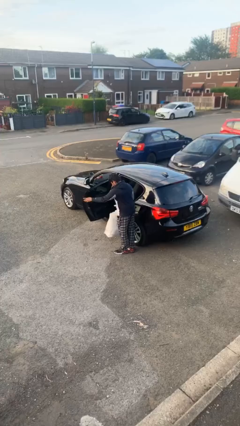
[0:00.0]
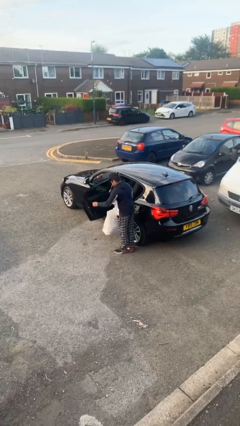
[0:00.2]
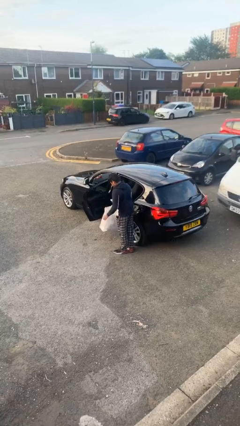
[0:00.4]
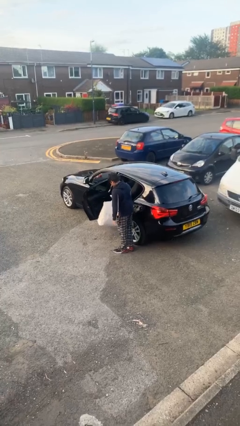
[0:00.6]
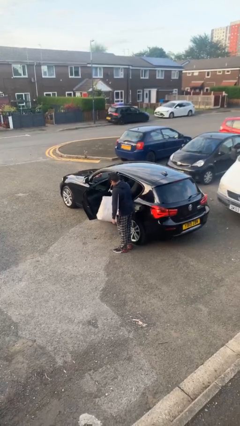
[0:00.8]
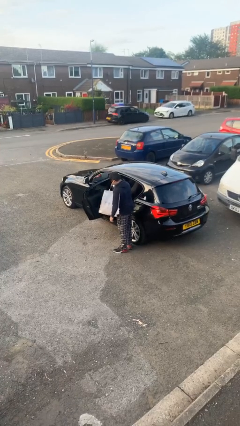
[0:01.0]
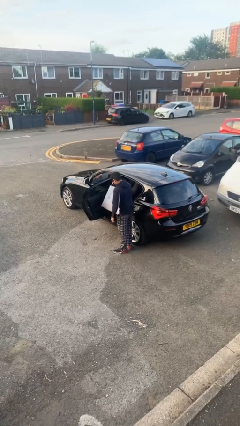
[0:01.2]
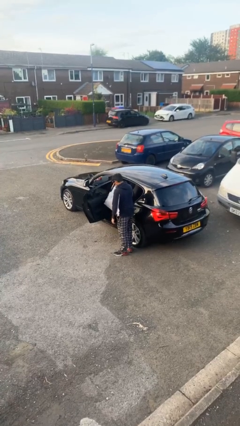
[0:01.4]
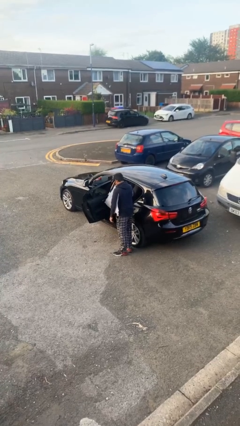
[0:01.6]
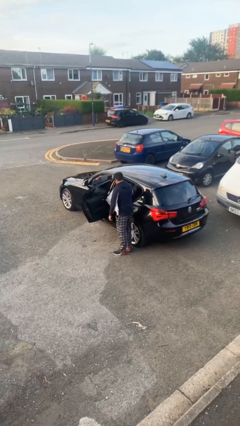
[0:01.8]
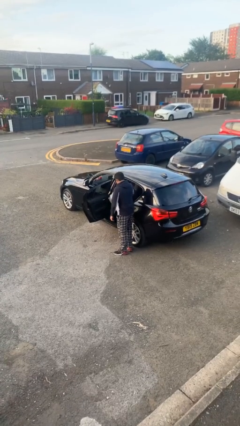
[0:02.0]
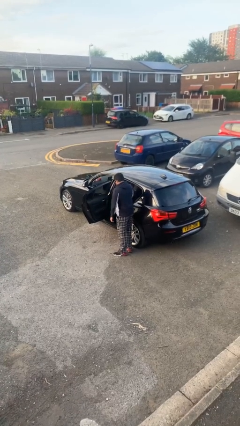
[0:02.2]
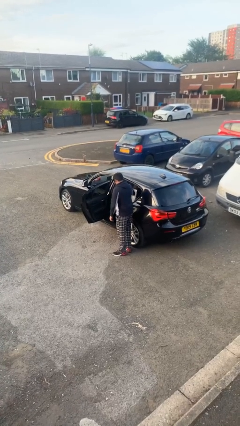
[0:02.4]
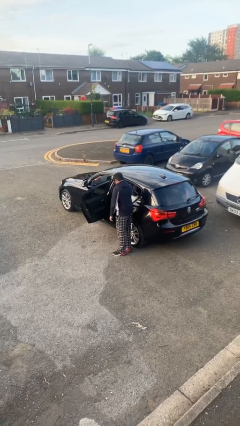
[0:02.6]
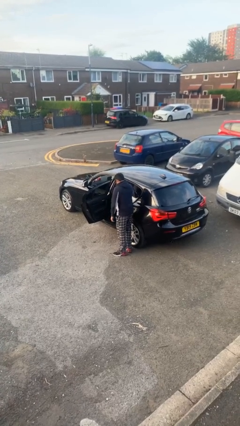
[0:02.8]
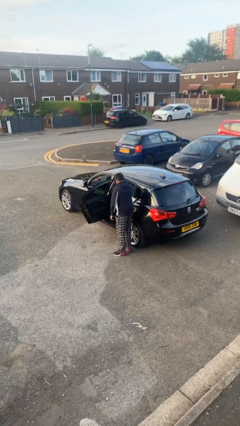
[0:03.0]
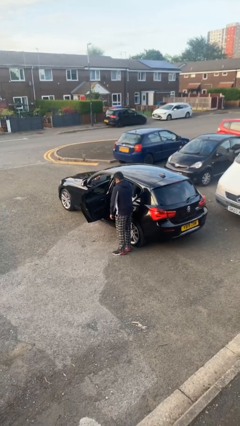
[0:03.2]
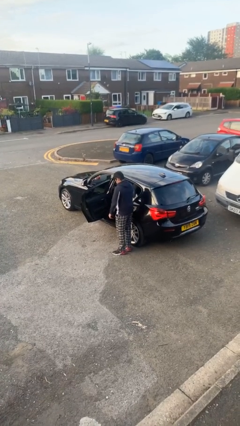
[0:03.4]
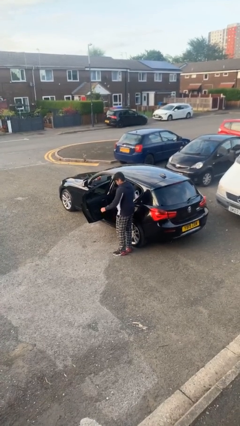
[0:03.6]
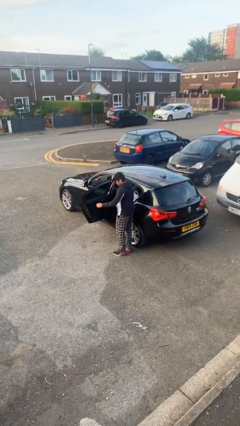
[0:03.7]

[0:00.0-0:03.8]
person loads car

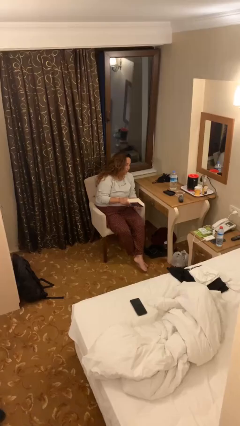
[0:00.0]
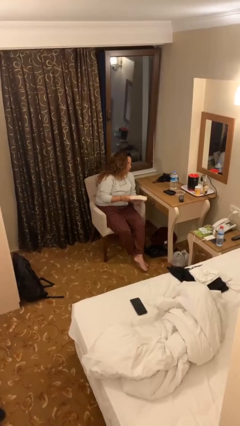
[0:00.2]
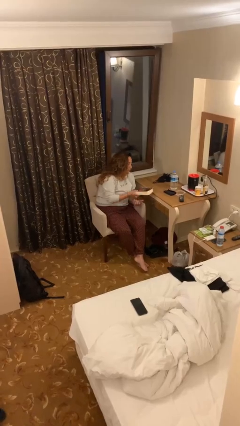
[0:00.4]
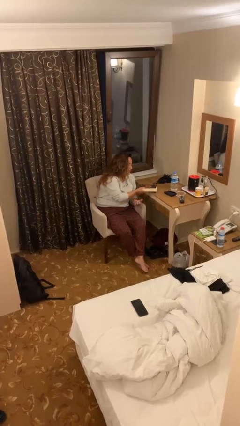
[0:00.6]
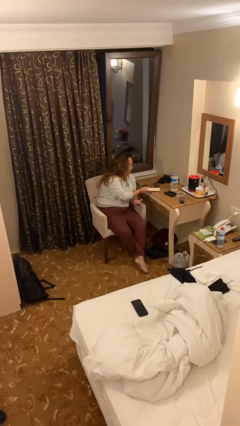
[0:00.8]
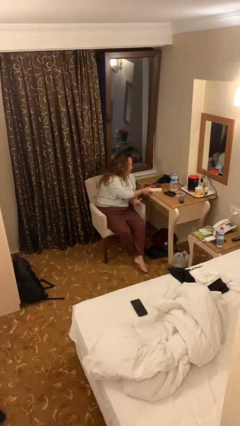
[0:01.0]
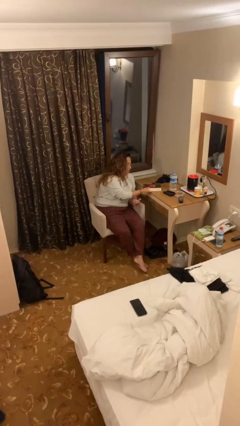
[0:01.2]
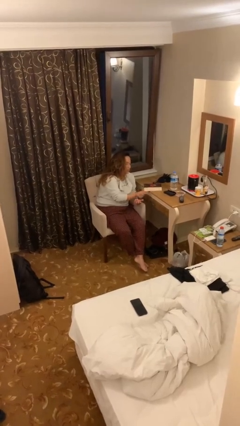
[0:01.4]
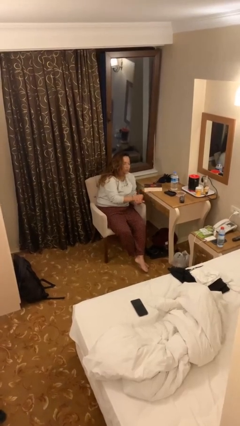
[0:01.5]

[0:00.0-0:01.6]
person puts down object on table

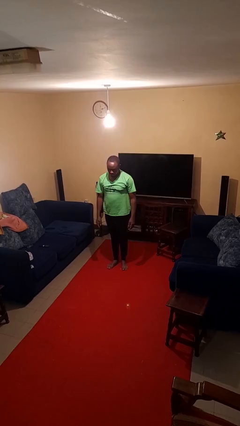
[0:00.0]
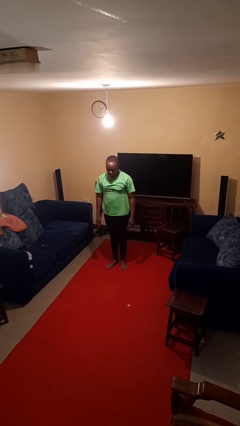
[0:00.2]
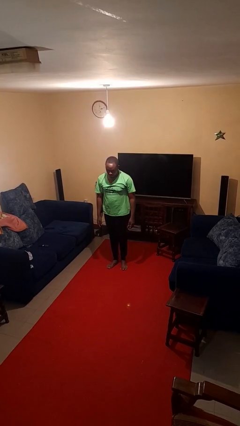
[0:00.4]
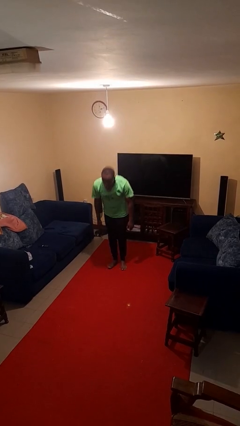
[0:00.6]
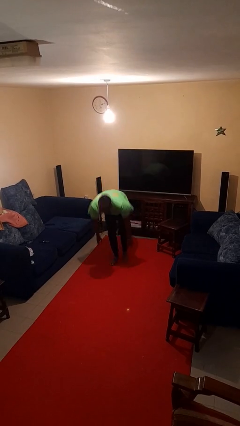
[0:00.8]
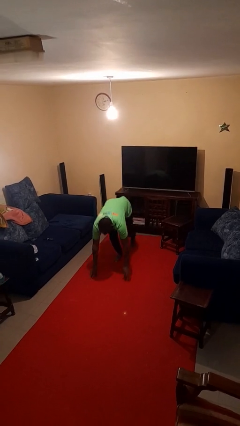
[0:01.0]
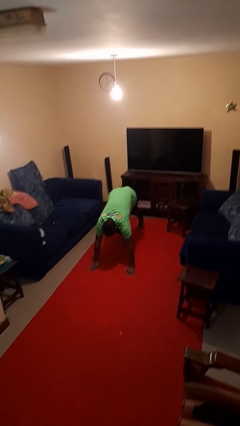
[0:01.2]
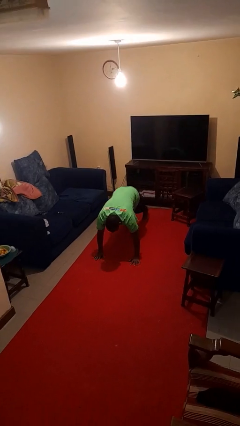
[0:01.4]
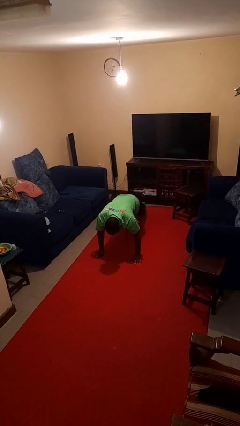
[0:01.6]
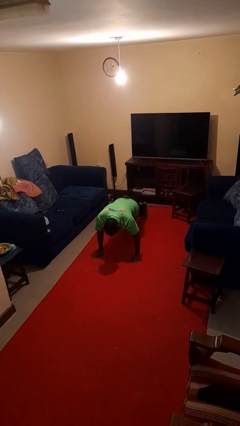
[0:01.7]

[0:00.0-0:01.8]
person exercises with plank

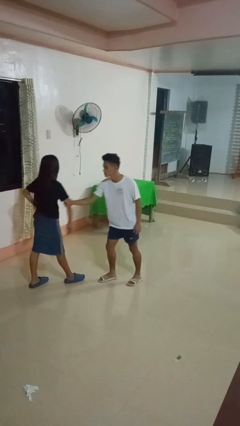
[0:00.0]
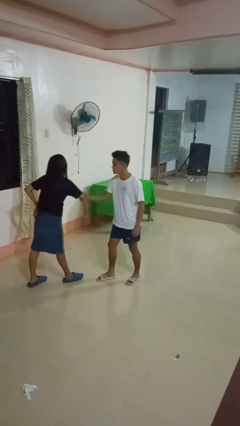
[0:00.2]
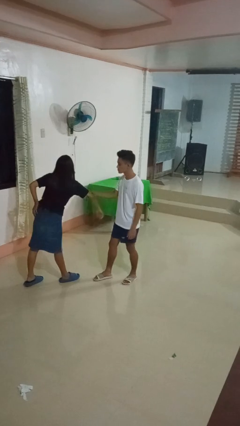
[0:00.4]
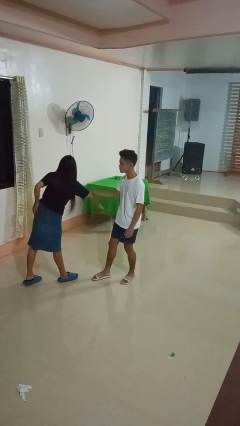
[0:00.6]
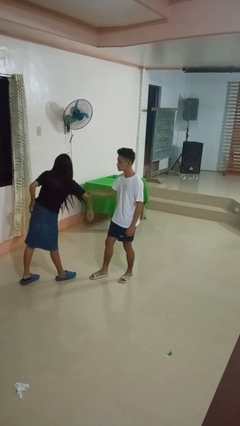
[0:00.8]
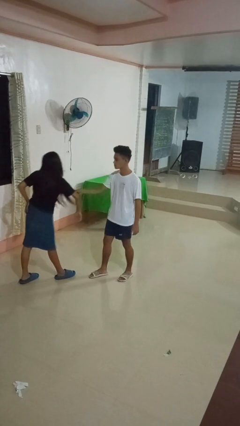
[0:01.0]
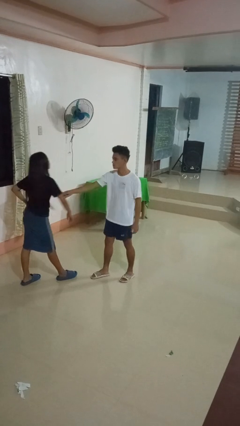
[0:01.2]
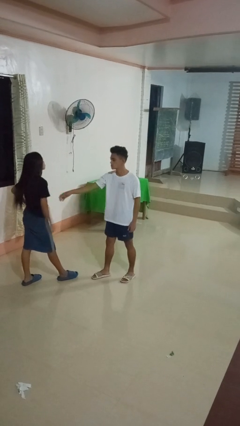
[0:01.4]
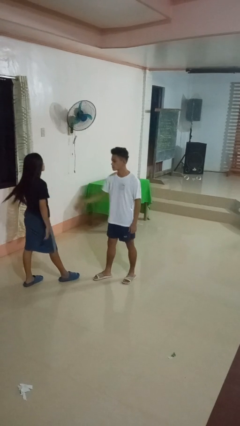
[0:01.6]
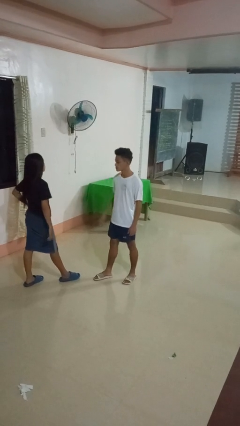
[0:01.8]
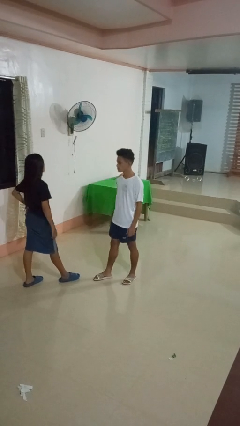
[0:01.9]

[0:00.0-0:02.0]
person grabs person by bicep

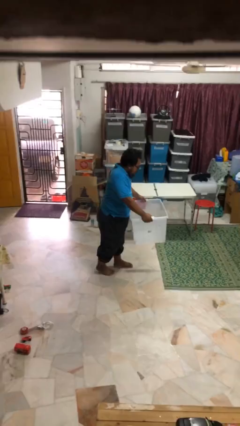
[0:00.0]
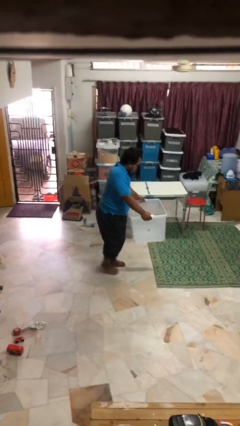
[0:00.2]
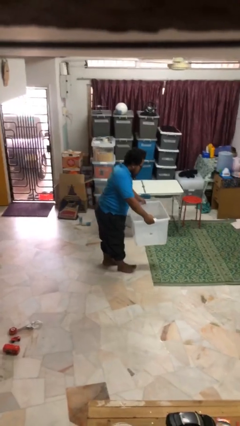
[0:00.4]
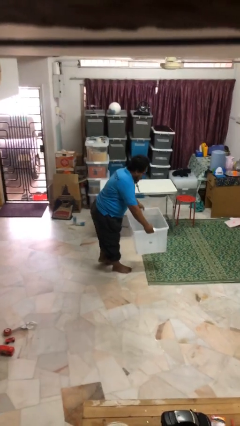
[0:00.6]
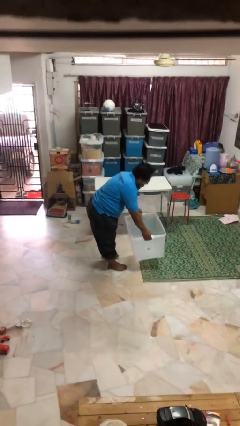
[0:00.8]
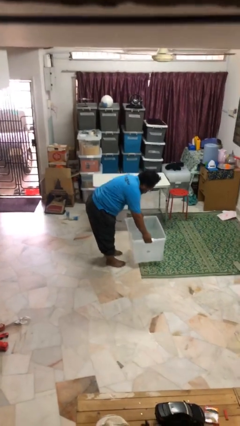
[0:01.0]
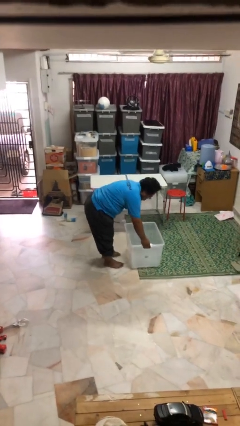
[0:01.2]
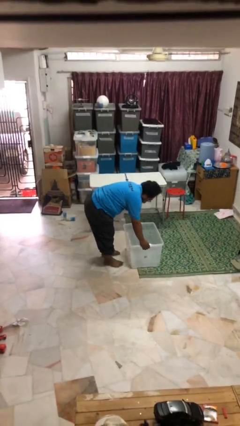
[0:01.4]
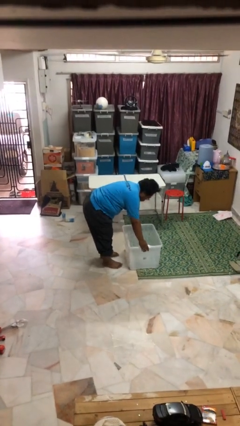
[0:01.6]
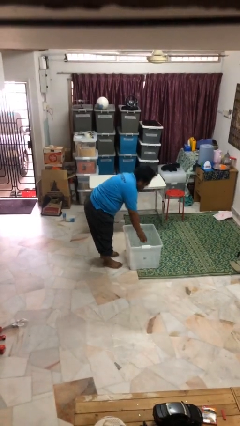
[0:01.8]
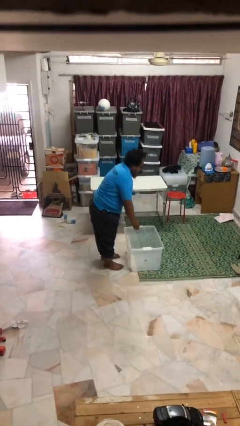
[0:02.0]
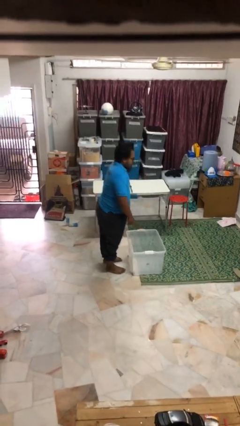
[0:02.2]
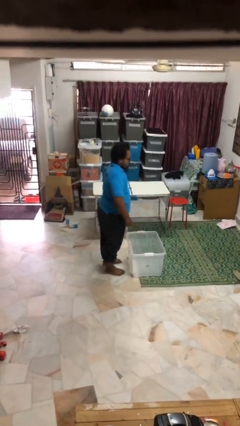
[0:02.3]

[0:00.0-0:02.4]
person puts down object on floor

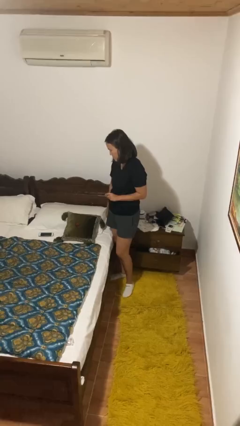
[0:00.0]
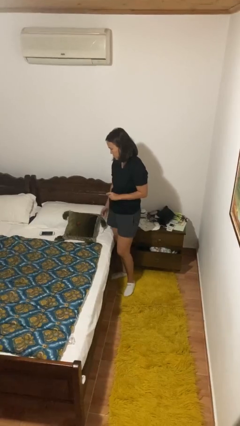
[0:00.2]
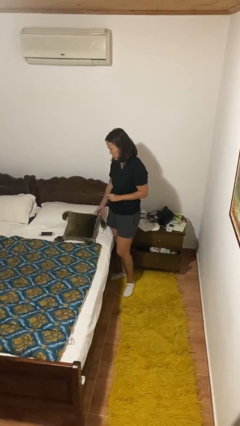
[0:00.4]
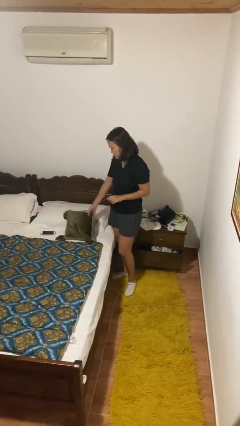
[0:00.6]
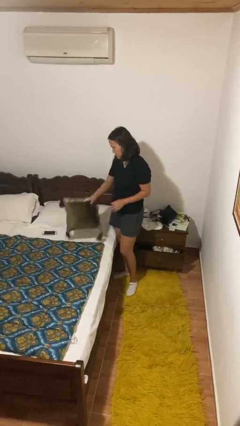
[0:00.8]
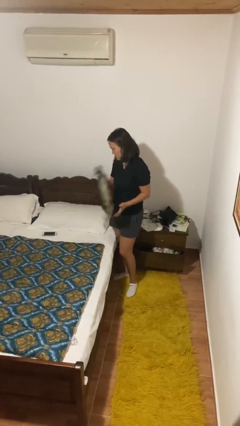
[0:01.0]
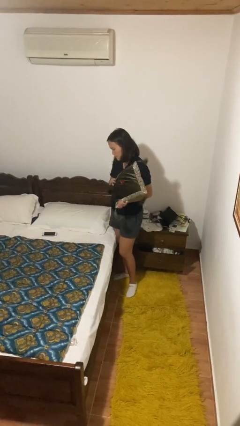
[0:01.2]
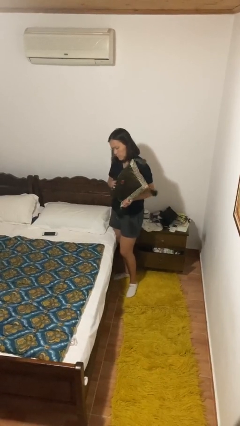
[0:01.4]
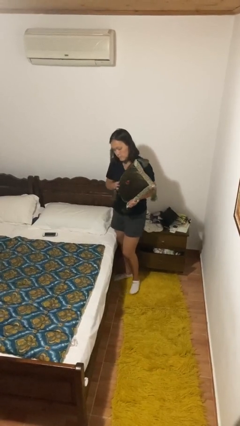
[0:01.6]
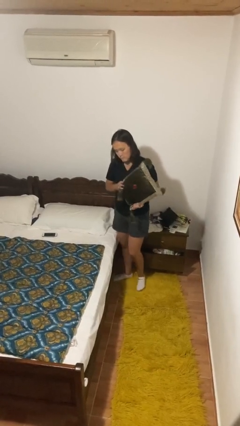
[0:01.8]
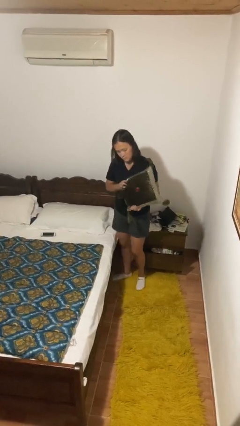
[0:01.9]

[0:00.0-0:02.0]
person picks up object from bed

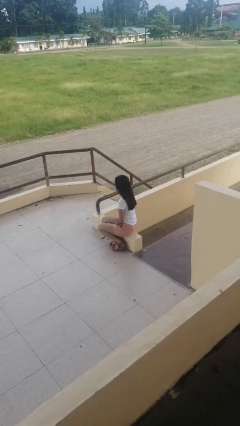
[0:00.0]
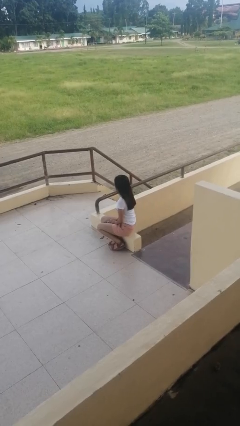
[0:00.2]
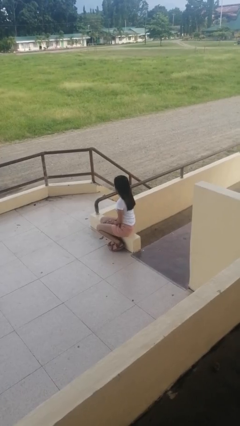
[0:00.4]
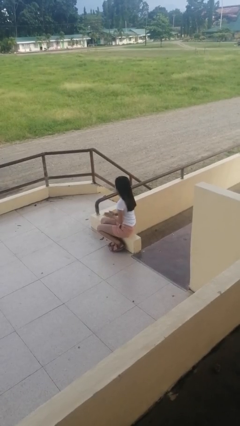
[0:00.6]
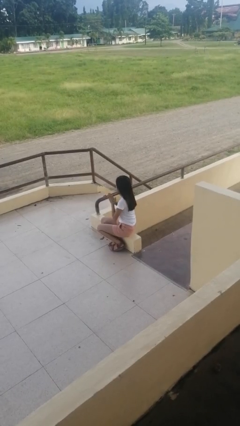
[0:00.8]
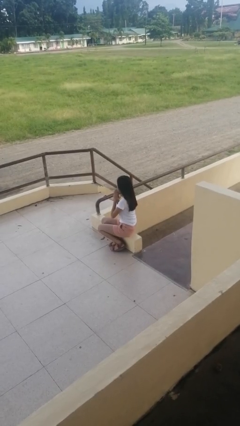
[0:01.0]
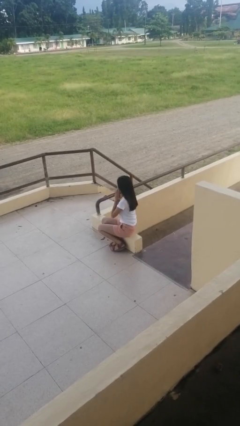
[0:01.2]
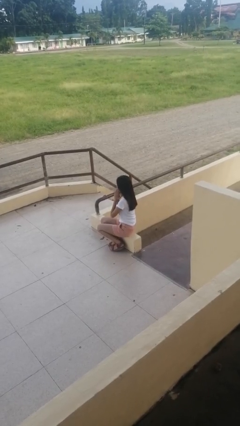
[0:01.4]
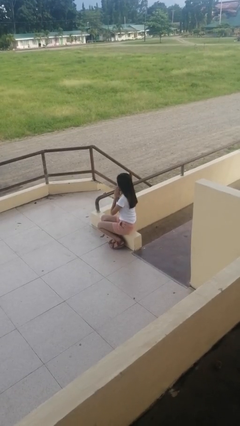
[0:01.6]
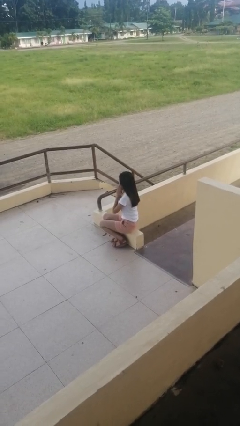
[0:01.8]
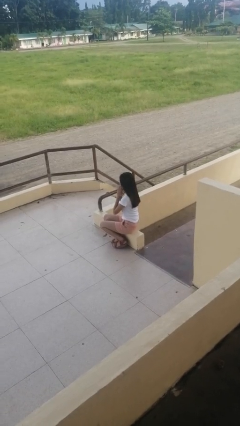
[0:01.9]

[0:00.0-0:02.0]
person prays

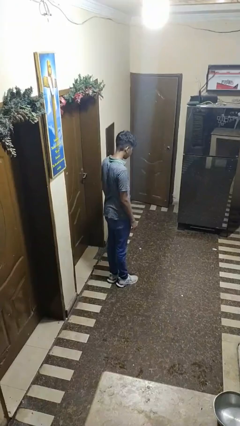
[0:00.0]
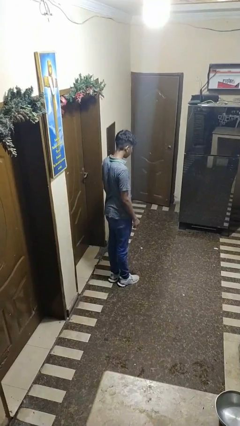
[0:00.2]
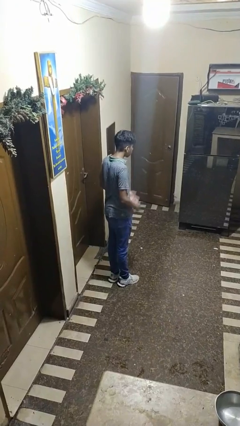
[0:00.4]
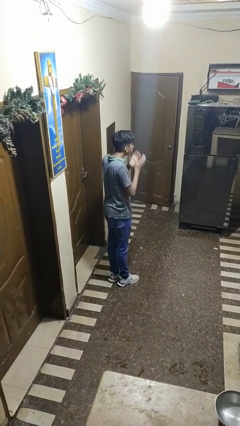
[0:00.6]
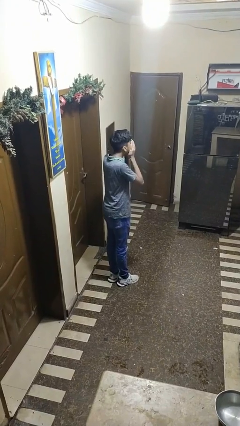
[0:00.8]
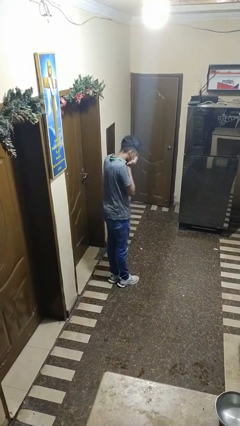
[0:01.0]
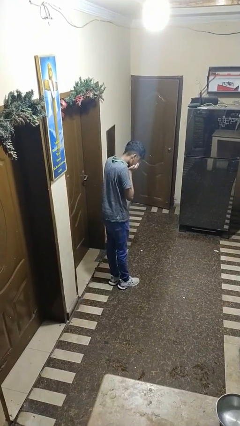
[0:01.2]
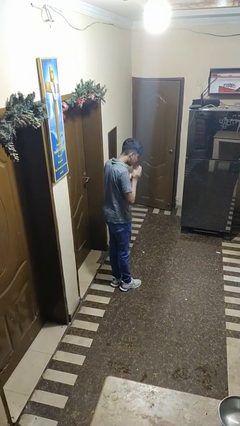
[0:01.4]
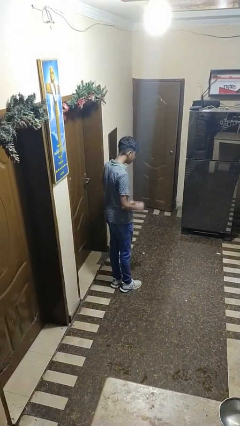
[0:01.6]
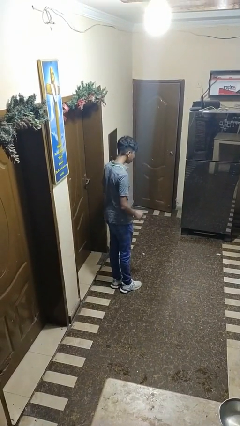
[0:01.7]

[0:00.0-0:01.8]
person sneezes into hand
